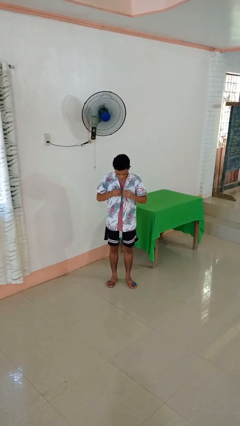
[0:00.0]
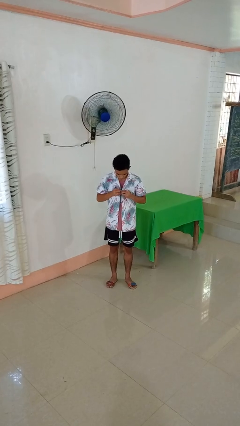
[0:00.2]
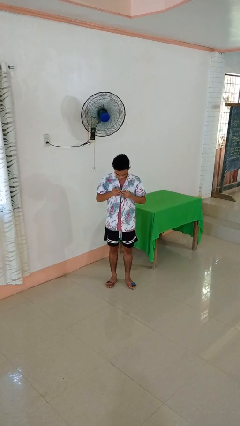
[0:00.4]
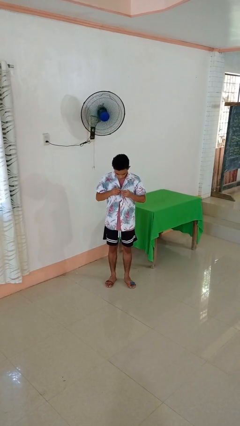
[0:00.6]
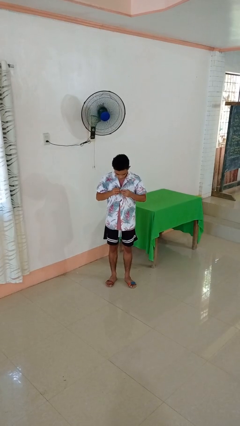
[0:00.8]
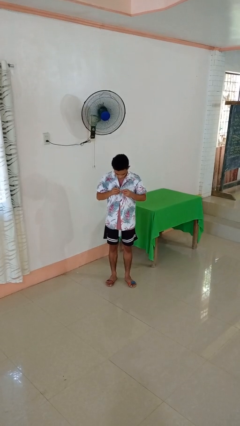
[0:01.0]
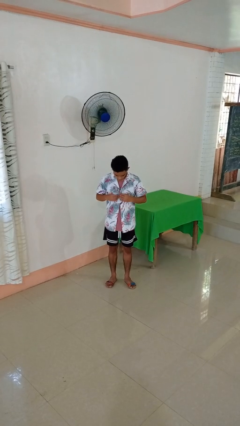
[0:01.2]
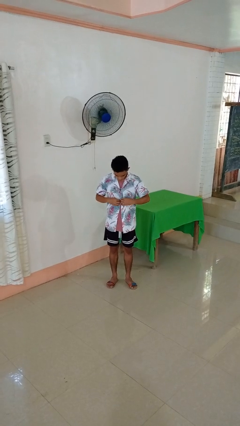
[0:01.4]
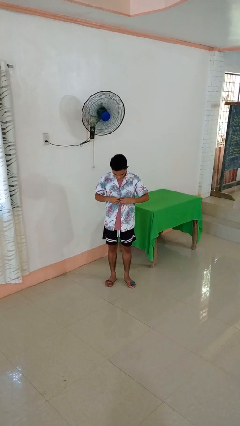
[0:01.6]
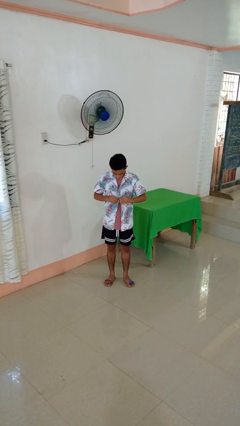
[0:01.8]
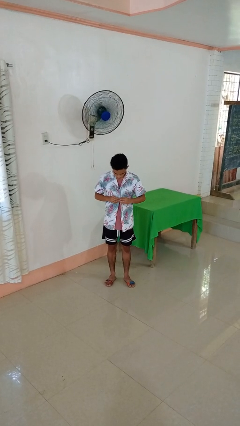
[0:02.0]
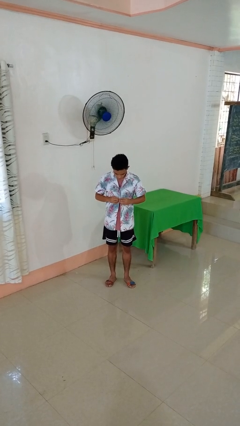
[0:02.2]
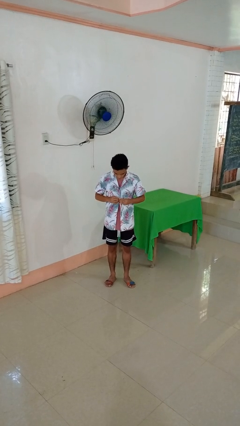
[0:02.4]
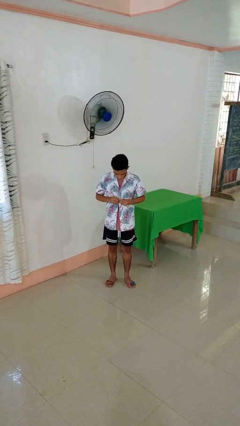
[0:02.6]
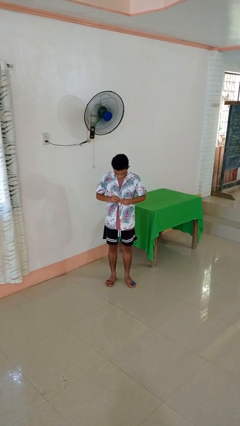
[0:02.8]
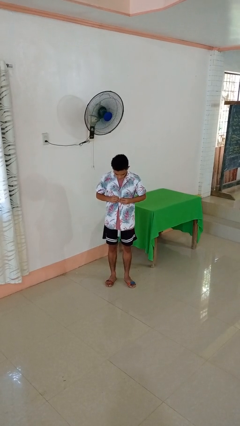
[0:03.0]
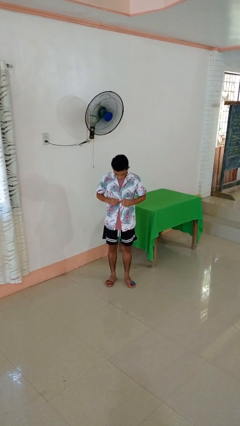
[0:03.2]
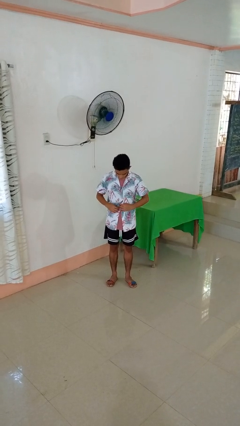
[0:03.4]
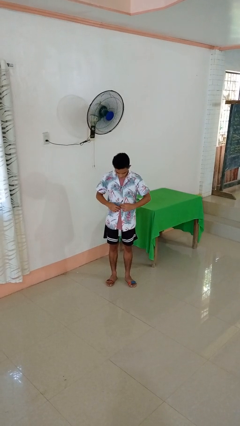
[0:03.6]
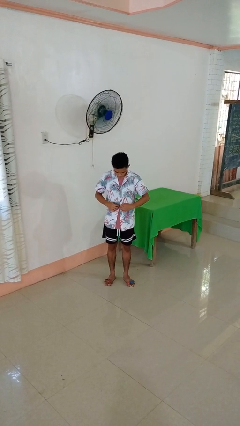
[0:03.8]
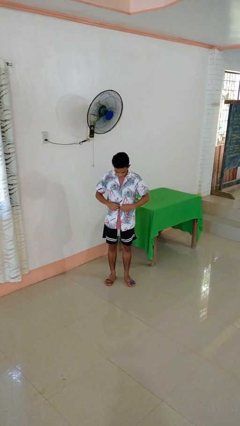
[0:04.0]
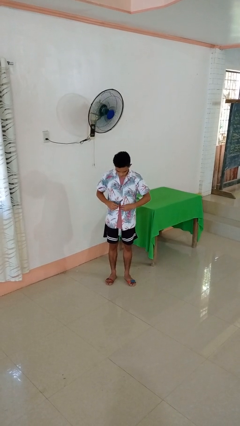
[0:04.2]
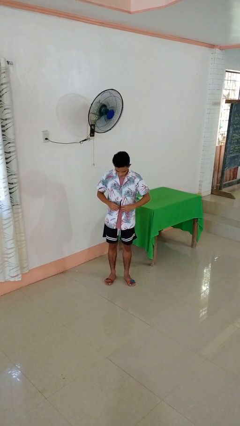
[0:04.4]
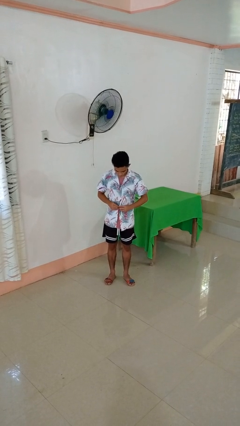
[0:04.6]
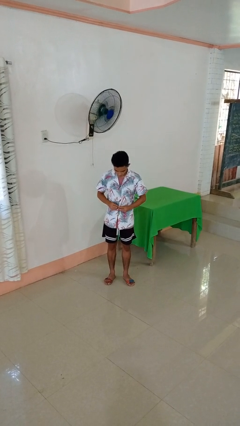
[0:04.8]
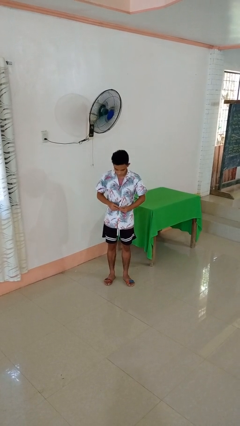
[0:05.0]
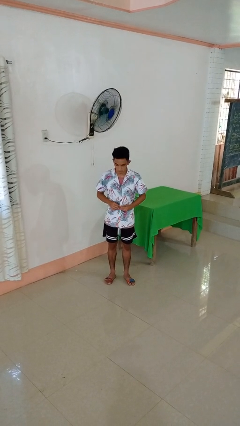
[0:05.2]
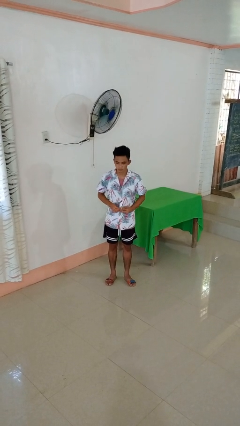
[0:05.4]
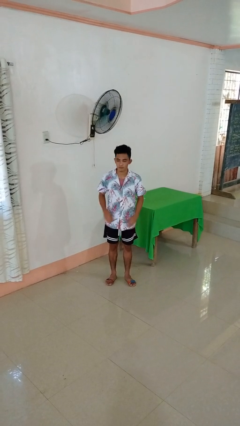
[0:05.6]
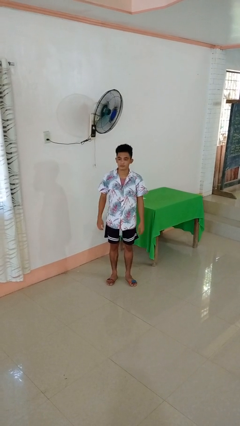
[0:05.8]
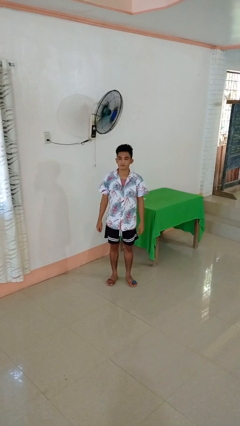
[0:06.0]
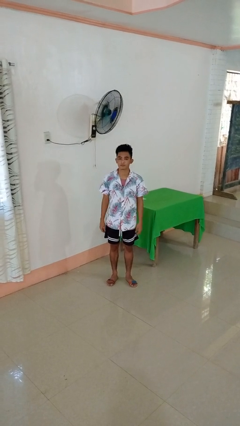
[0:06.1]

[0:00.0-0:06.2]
person buttons shirt

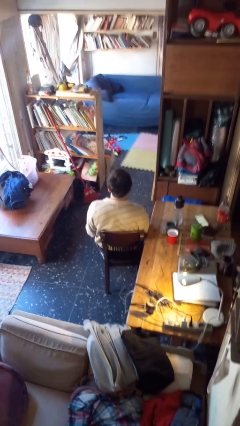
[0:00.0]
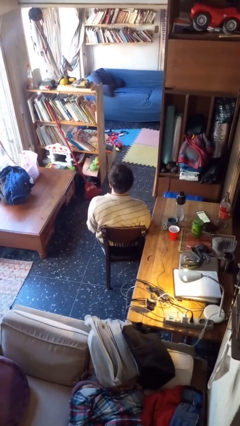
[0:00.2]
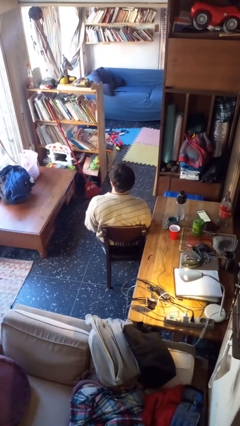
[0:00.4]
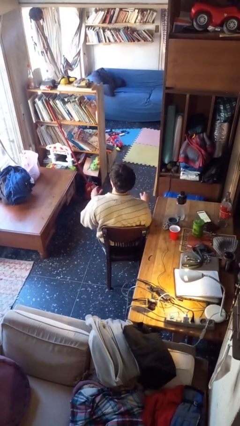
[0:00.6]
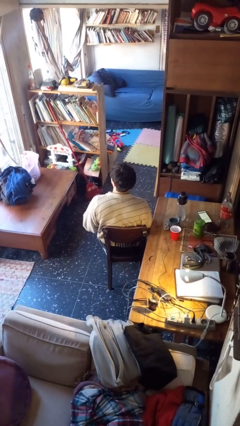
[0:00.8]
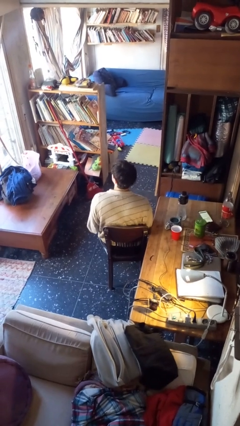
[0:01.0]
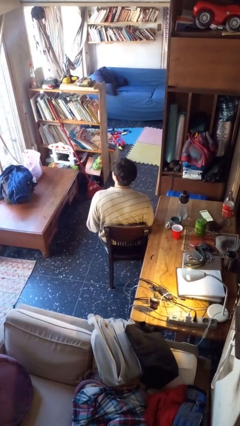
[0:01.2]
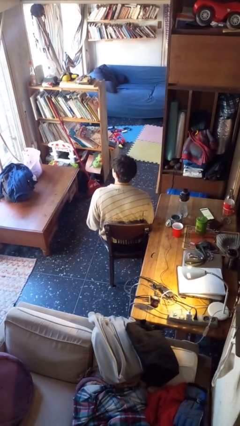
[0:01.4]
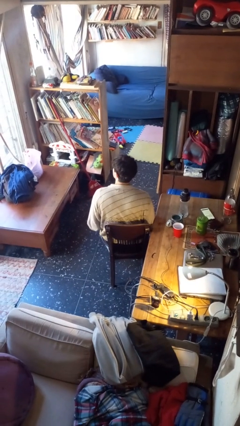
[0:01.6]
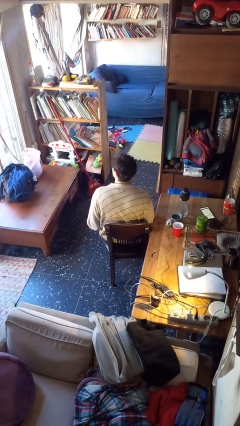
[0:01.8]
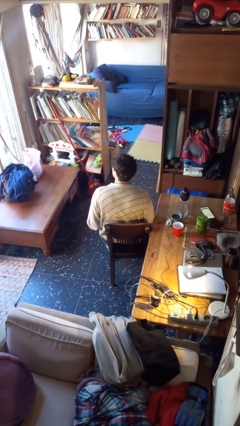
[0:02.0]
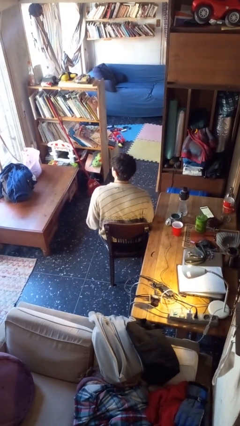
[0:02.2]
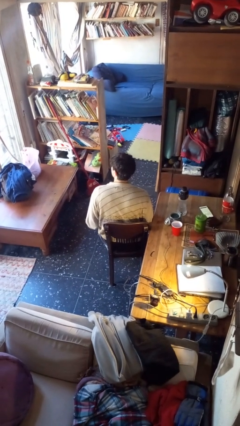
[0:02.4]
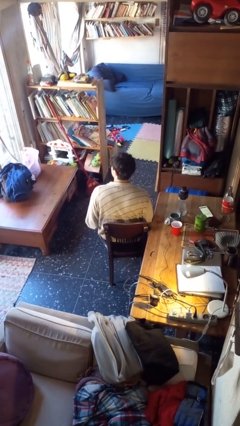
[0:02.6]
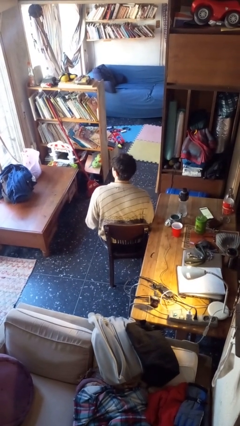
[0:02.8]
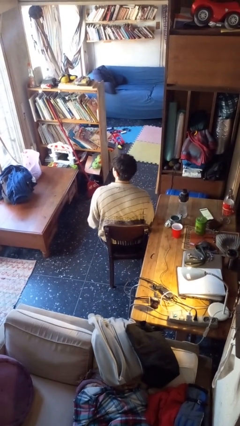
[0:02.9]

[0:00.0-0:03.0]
person slaps hands on thighs

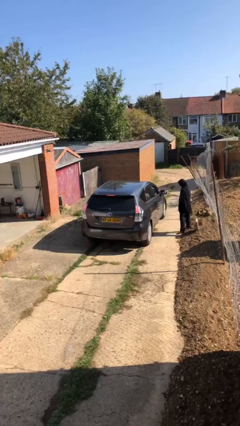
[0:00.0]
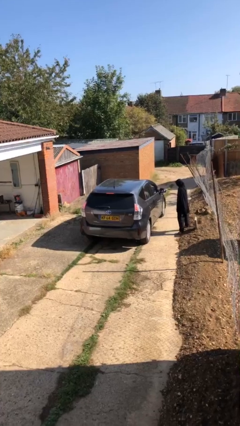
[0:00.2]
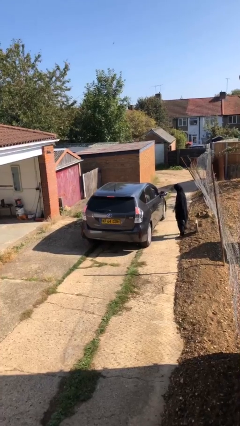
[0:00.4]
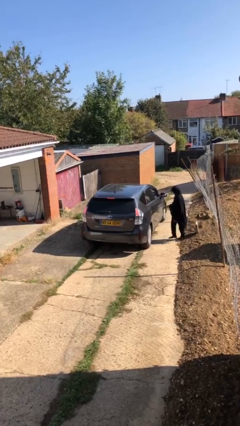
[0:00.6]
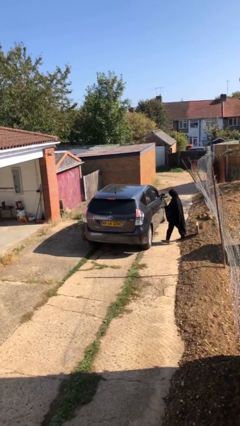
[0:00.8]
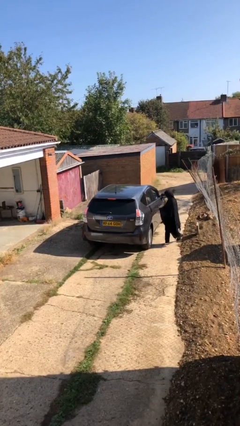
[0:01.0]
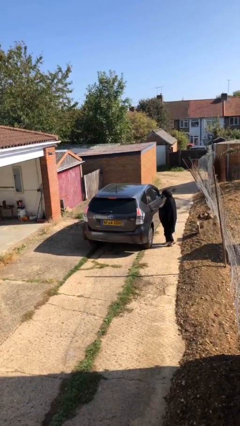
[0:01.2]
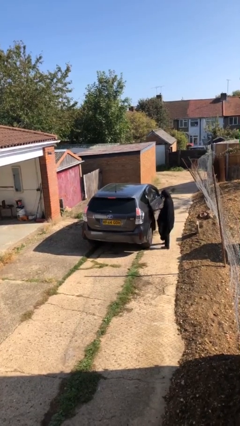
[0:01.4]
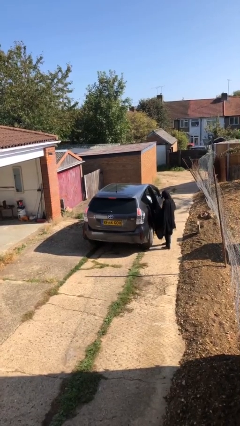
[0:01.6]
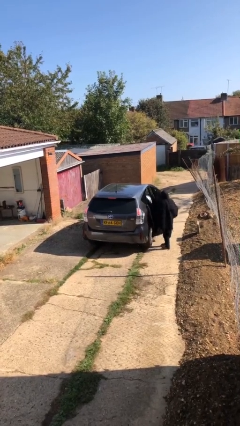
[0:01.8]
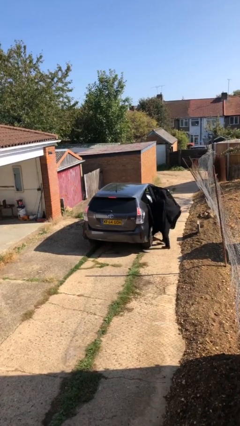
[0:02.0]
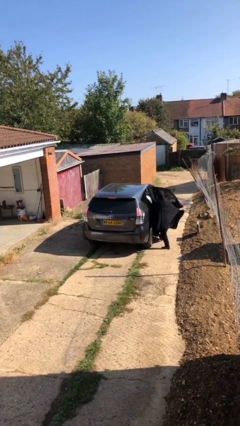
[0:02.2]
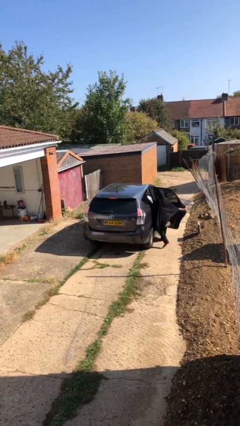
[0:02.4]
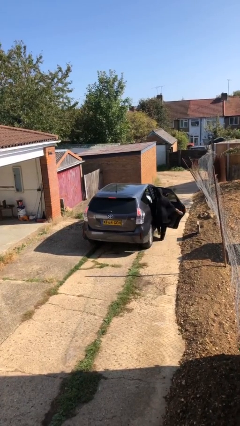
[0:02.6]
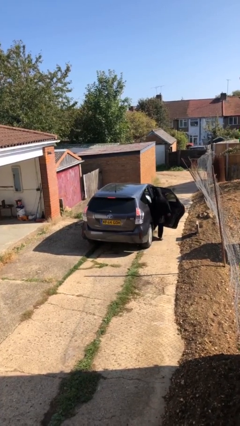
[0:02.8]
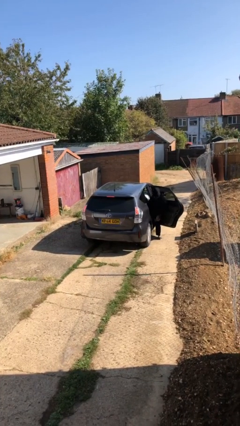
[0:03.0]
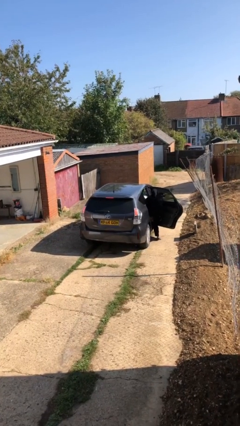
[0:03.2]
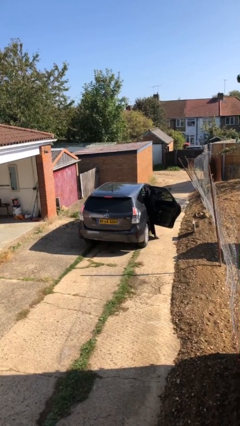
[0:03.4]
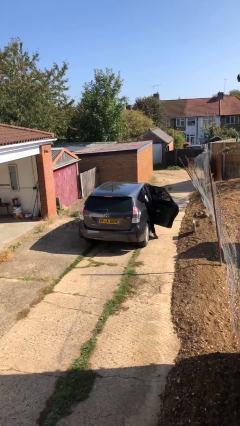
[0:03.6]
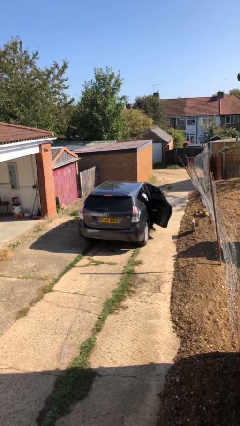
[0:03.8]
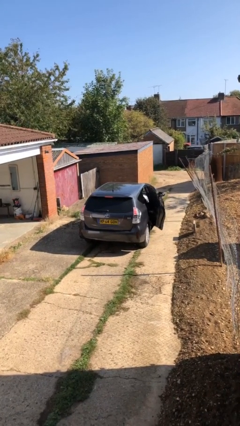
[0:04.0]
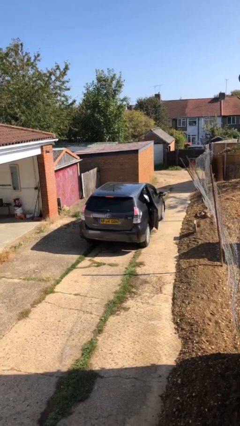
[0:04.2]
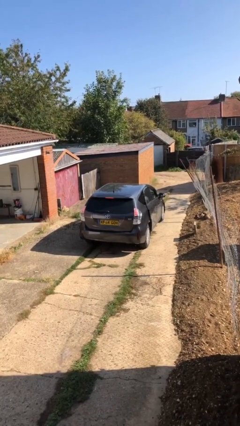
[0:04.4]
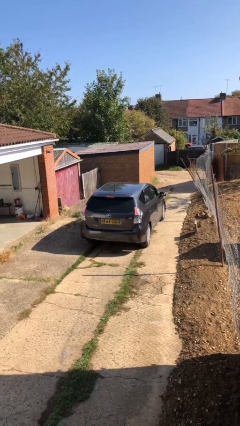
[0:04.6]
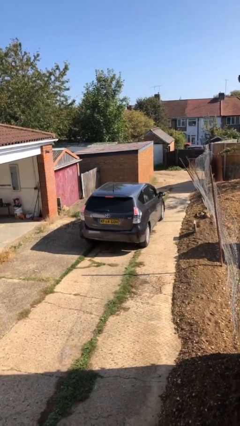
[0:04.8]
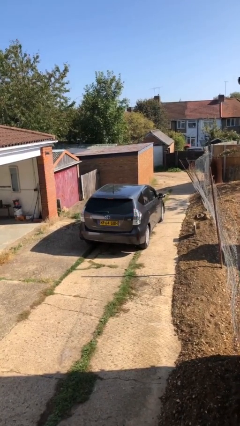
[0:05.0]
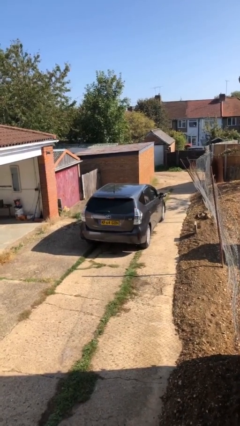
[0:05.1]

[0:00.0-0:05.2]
car picks up person

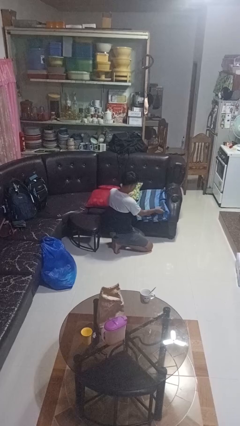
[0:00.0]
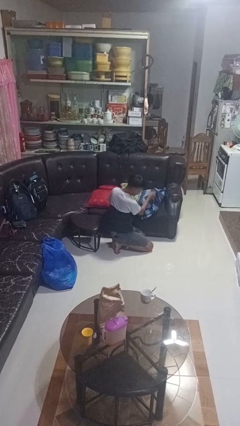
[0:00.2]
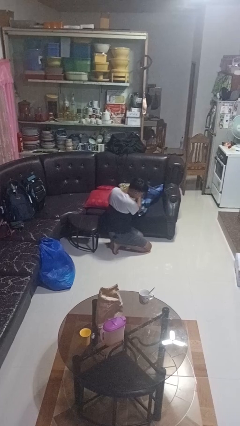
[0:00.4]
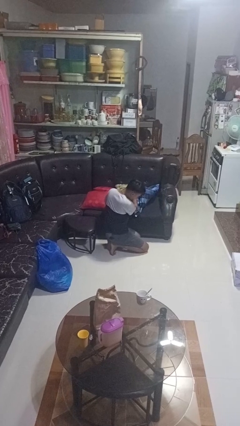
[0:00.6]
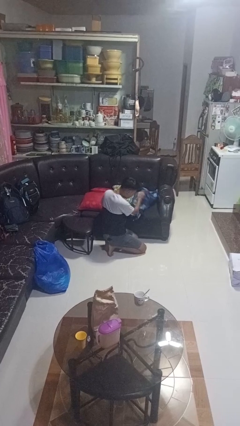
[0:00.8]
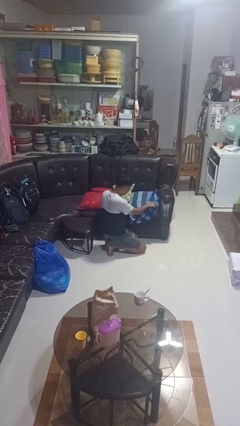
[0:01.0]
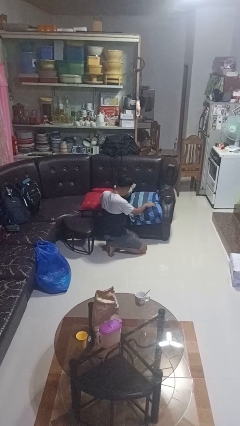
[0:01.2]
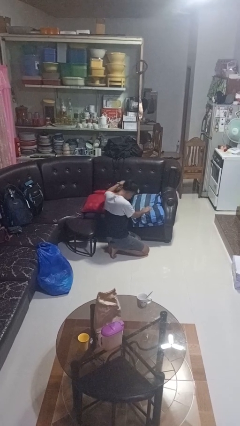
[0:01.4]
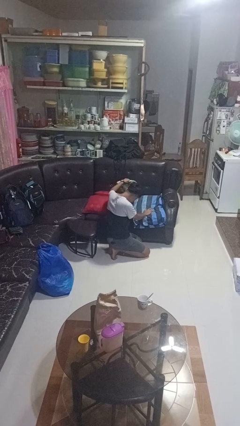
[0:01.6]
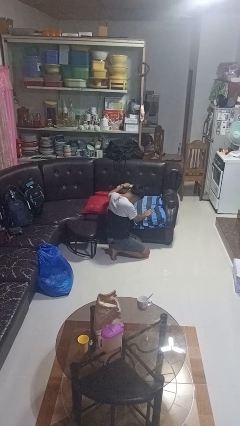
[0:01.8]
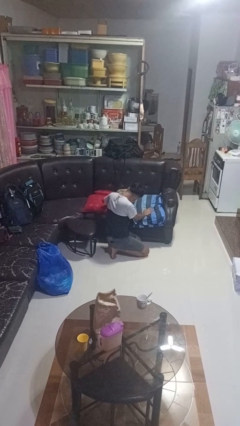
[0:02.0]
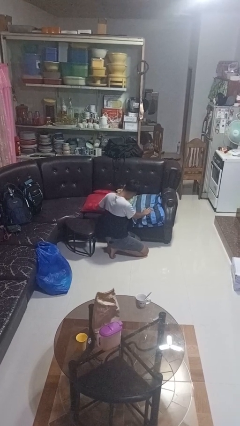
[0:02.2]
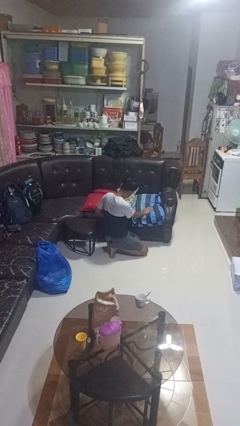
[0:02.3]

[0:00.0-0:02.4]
person searches in couch

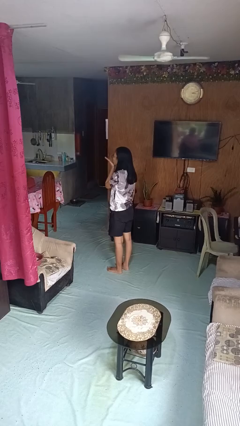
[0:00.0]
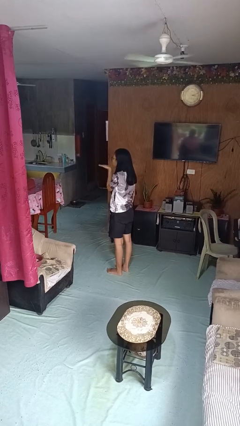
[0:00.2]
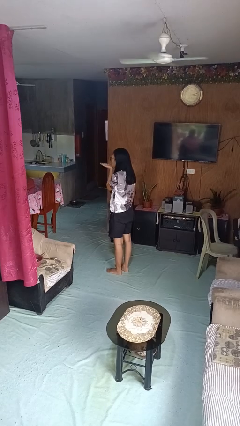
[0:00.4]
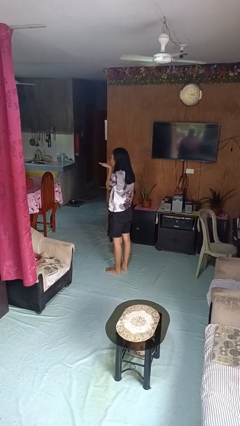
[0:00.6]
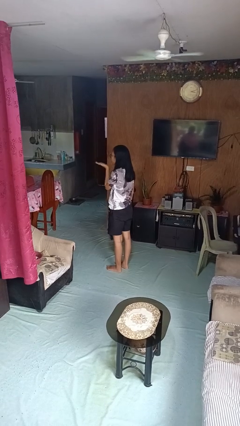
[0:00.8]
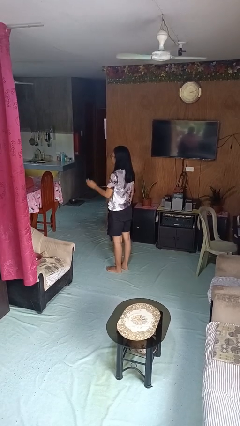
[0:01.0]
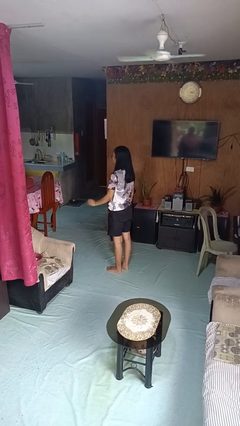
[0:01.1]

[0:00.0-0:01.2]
person gestures blow kiss
